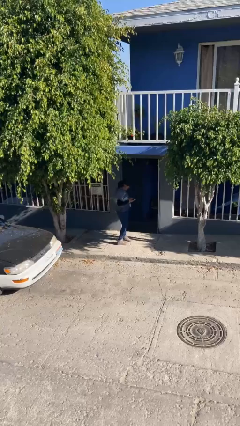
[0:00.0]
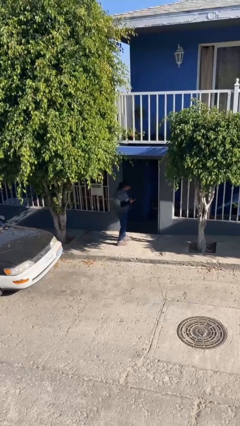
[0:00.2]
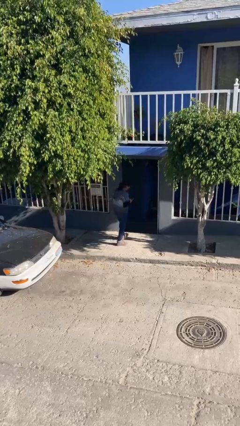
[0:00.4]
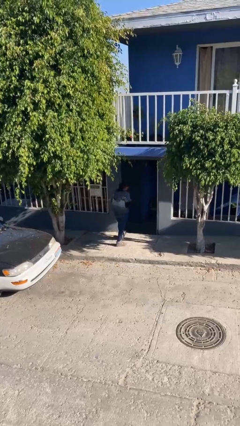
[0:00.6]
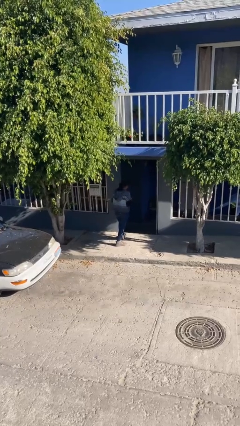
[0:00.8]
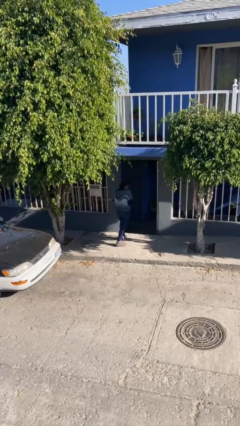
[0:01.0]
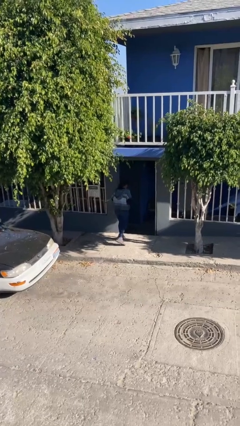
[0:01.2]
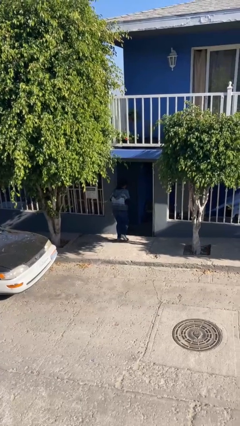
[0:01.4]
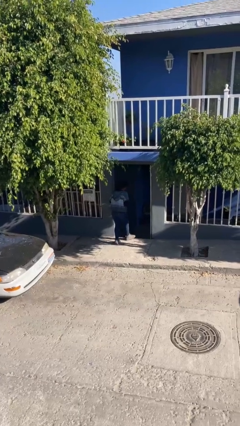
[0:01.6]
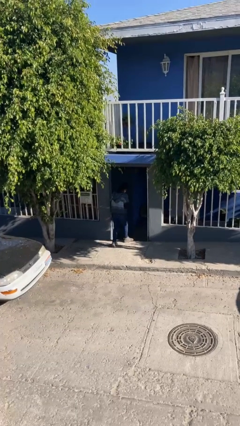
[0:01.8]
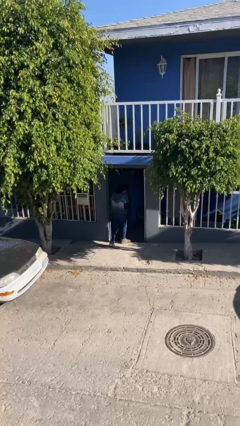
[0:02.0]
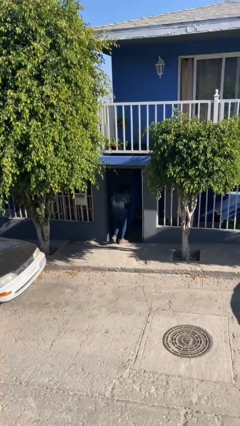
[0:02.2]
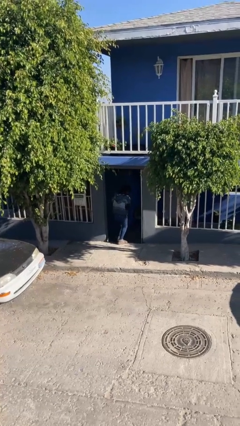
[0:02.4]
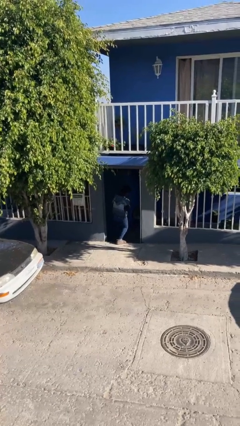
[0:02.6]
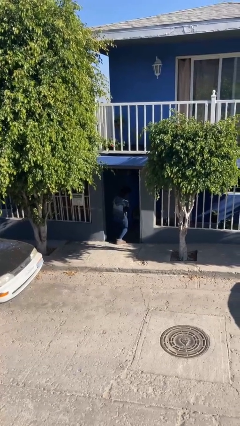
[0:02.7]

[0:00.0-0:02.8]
person exits scene through structure

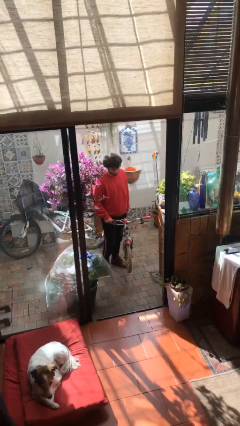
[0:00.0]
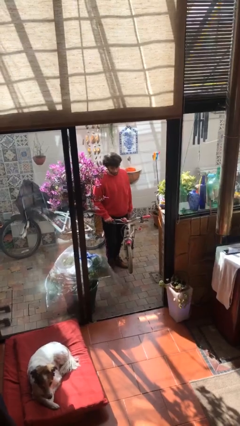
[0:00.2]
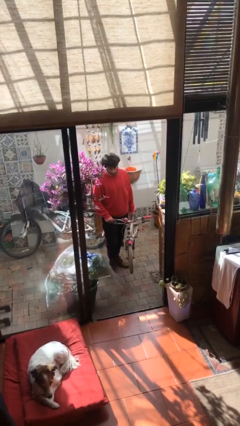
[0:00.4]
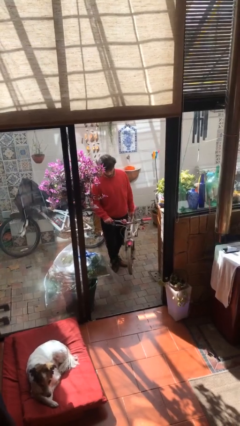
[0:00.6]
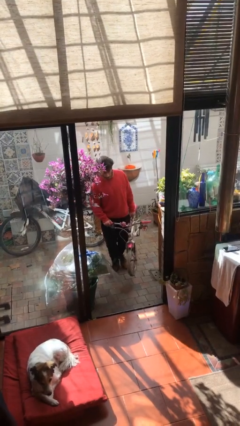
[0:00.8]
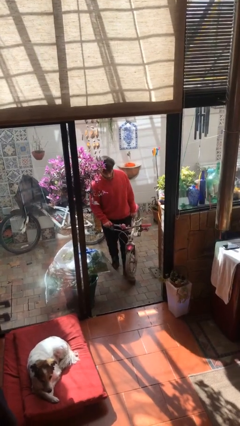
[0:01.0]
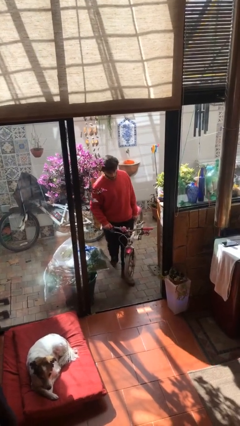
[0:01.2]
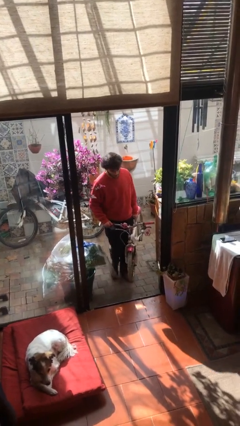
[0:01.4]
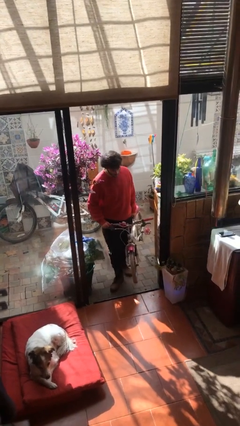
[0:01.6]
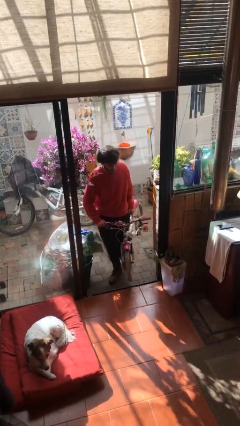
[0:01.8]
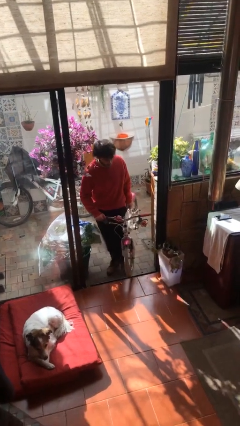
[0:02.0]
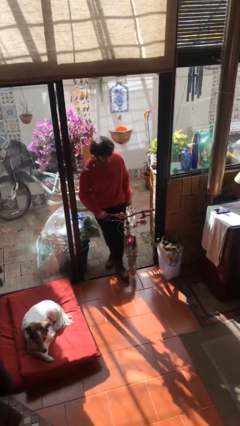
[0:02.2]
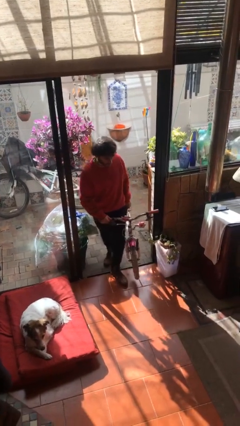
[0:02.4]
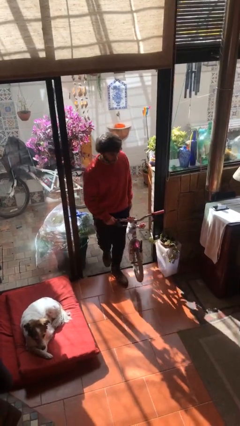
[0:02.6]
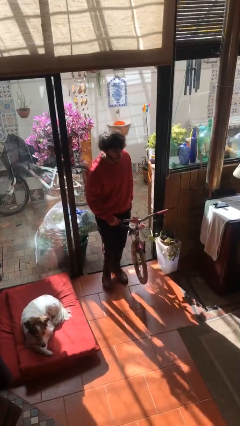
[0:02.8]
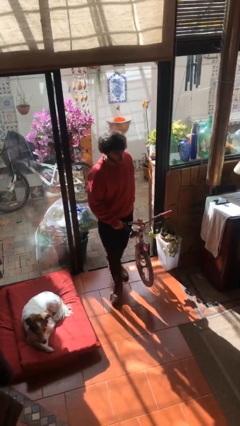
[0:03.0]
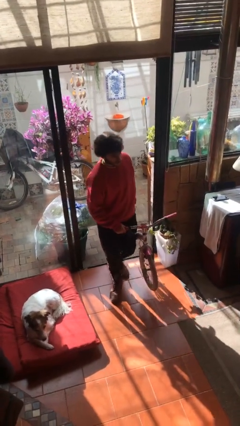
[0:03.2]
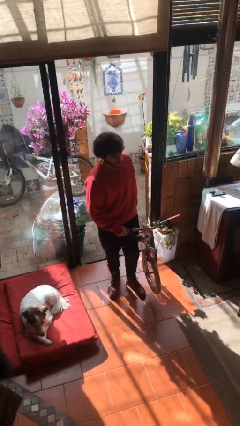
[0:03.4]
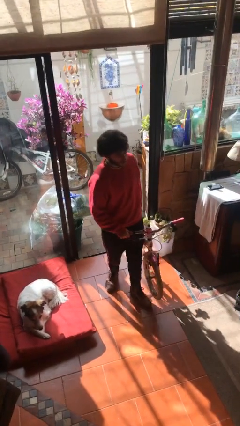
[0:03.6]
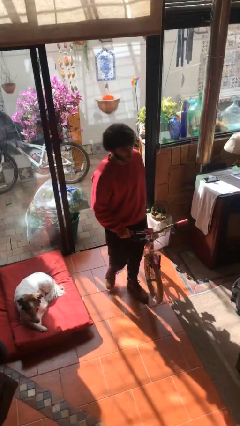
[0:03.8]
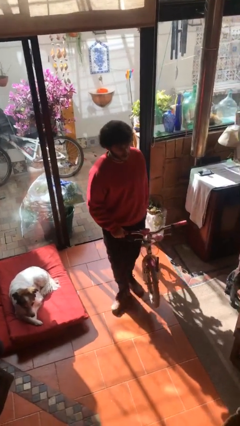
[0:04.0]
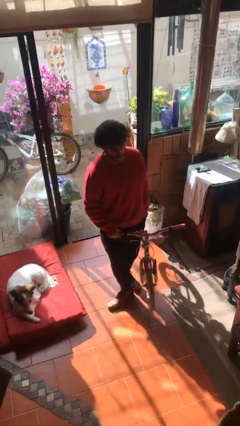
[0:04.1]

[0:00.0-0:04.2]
person carries bicycle

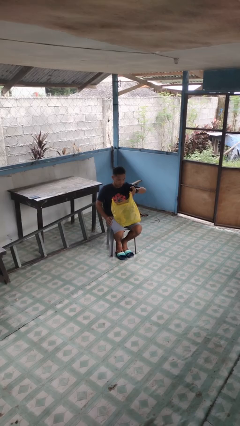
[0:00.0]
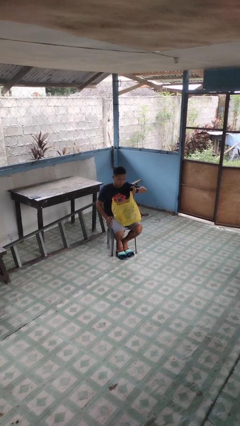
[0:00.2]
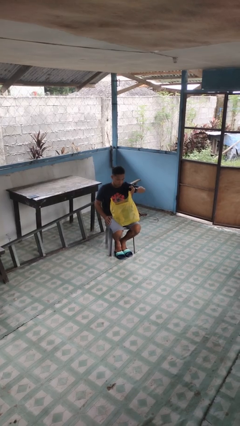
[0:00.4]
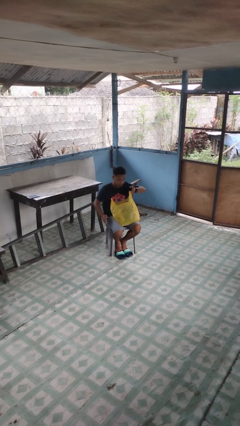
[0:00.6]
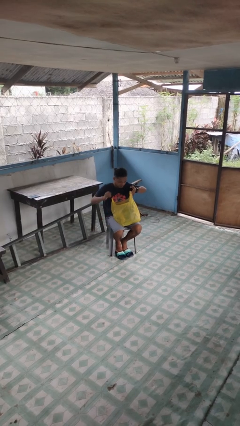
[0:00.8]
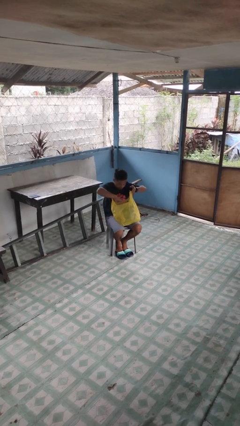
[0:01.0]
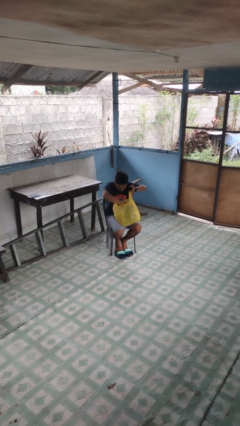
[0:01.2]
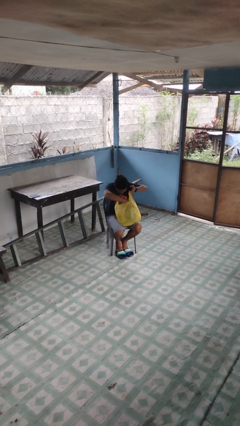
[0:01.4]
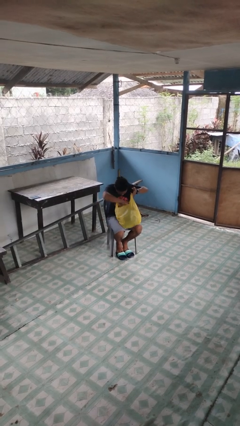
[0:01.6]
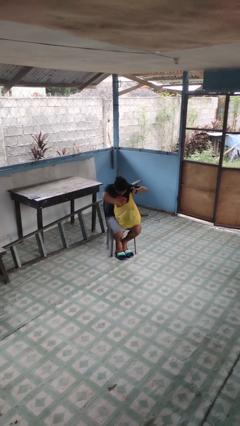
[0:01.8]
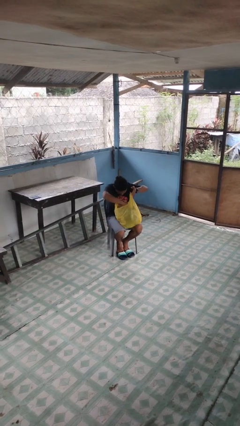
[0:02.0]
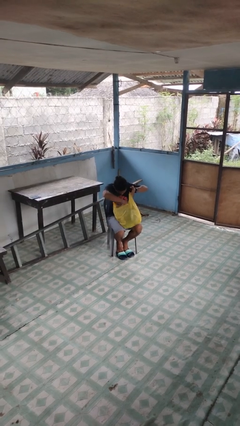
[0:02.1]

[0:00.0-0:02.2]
person searches in bag

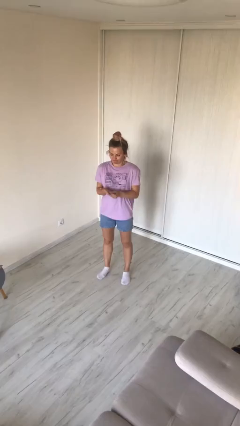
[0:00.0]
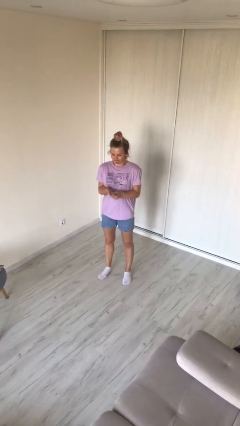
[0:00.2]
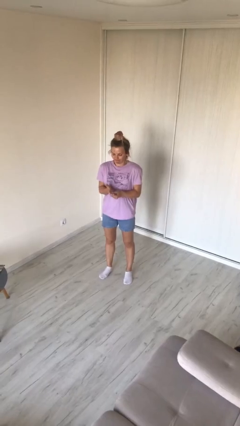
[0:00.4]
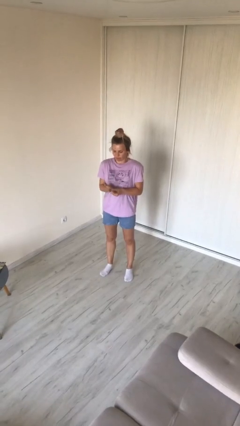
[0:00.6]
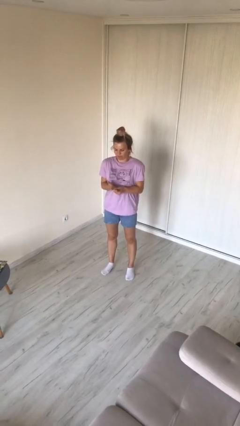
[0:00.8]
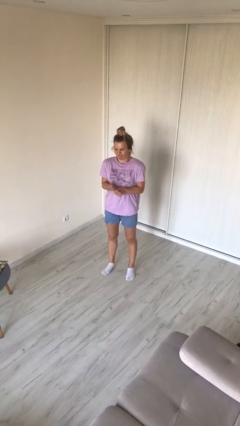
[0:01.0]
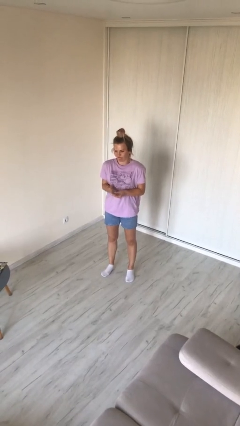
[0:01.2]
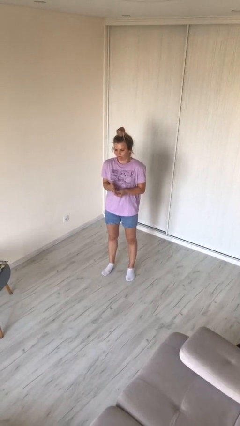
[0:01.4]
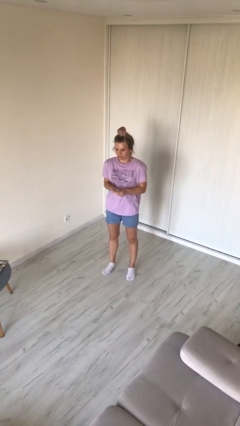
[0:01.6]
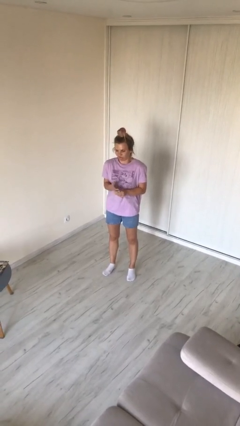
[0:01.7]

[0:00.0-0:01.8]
person cracks knuckles

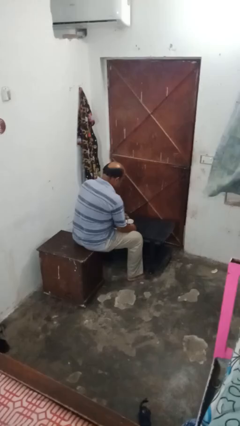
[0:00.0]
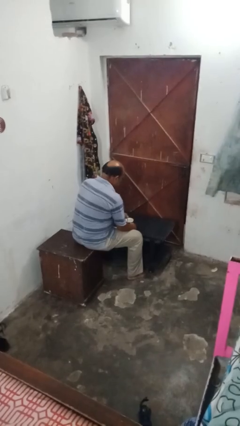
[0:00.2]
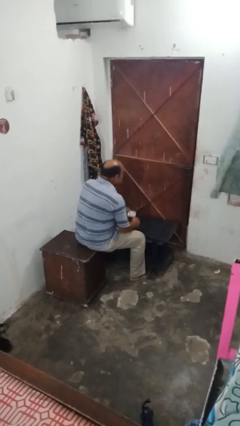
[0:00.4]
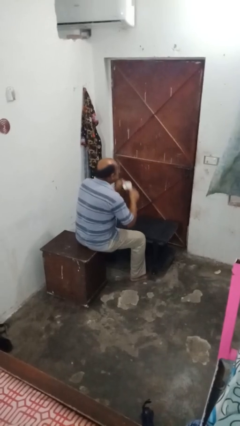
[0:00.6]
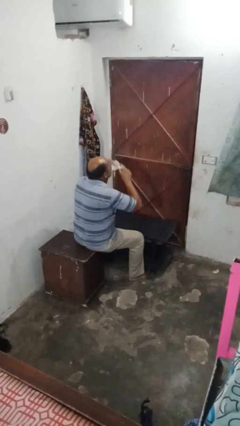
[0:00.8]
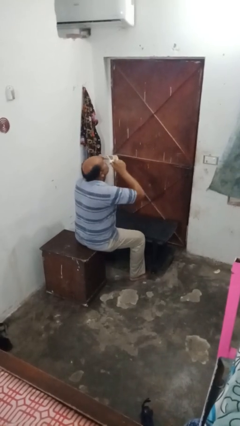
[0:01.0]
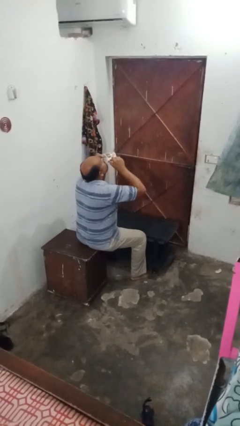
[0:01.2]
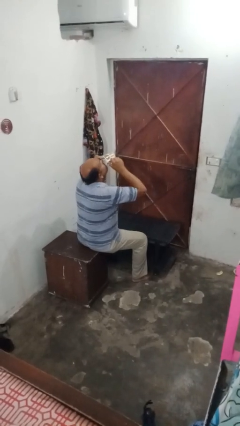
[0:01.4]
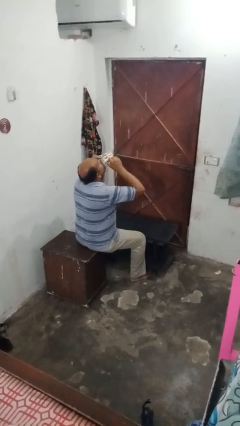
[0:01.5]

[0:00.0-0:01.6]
person drinks from mug

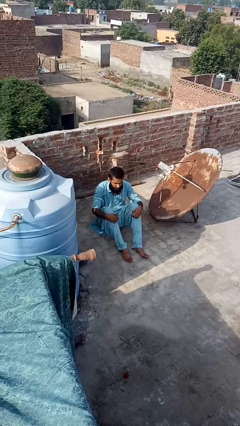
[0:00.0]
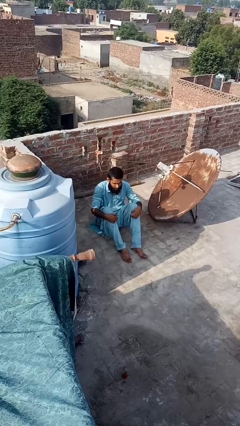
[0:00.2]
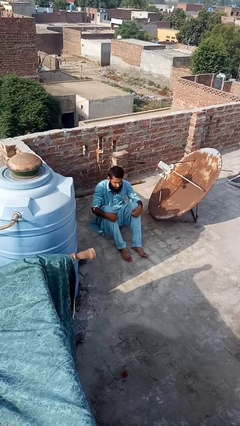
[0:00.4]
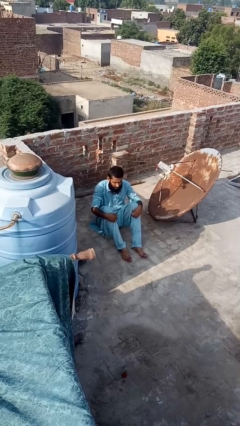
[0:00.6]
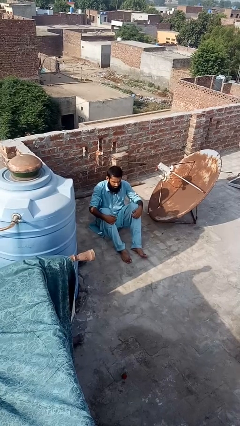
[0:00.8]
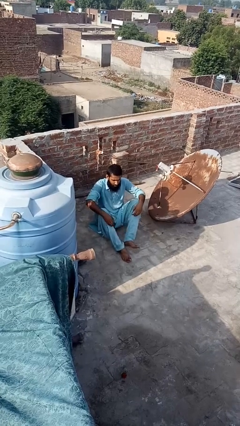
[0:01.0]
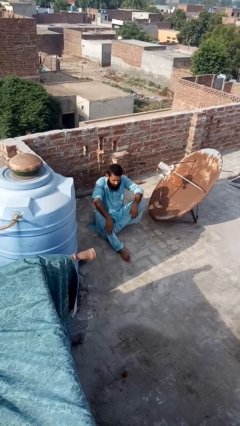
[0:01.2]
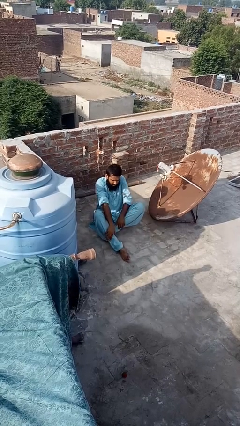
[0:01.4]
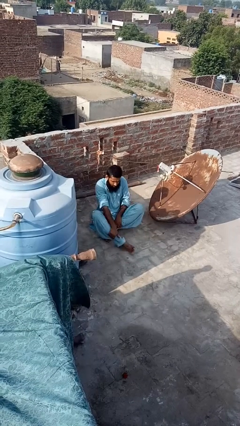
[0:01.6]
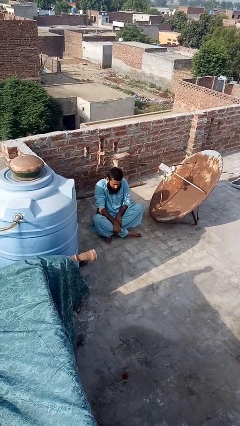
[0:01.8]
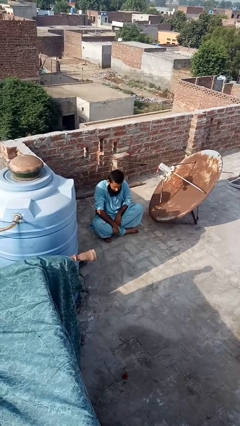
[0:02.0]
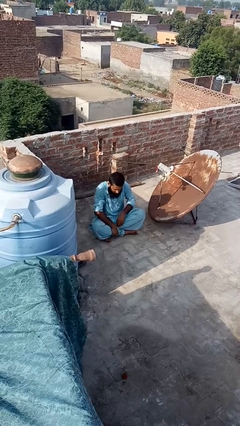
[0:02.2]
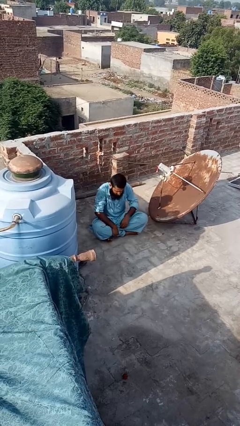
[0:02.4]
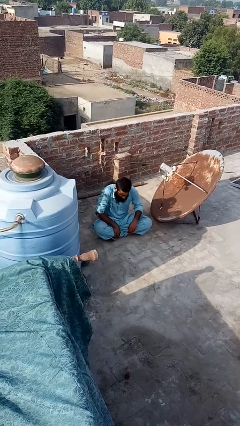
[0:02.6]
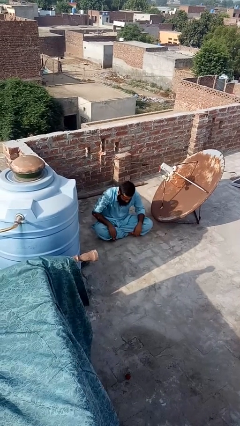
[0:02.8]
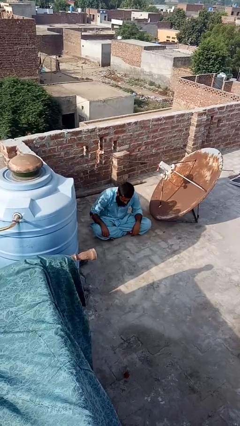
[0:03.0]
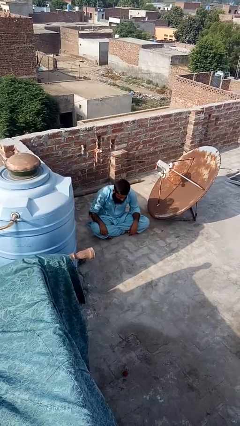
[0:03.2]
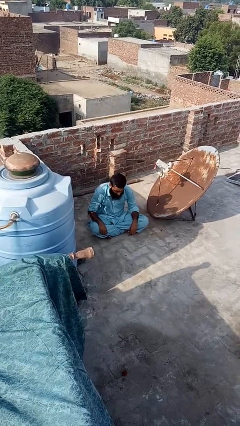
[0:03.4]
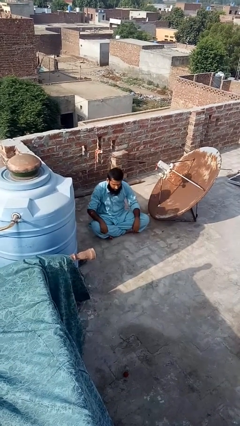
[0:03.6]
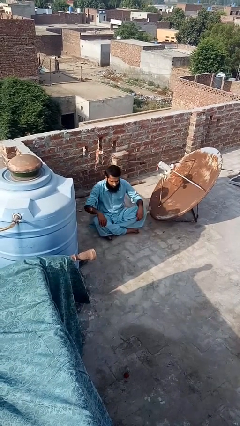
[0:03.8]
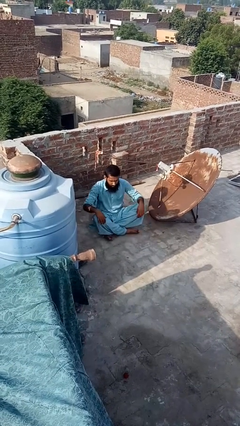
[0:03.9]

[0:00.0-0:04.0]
person crosses legs
